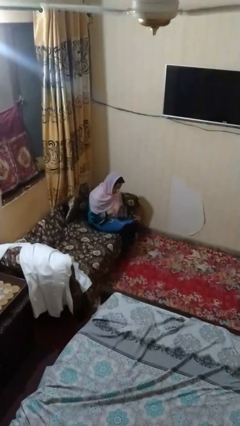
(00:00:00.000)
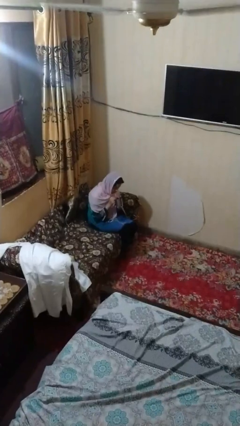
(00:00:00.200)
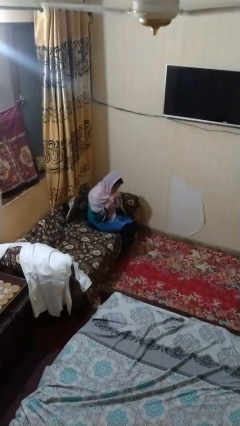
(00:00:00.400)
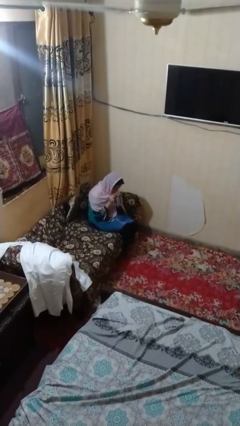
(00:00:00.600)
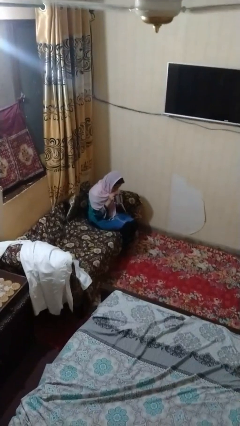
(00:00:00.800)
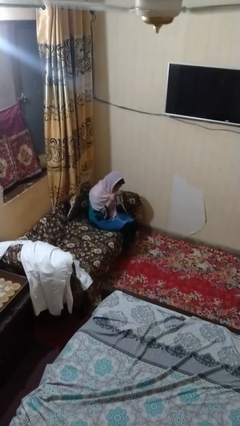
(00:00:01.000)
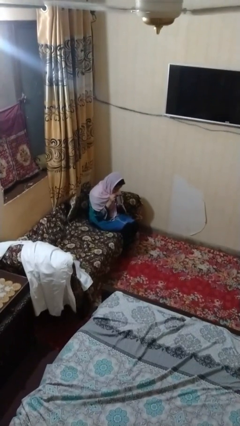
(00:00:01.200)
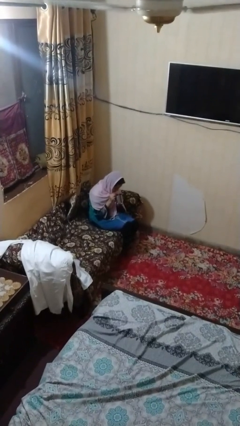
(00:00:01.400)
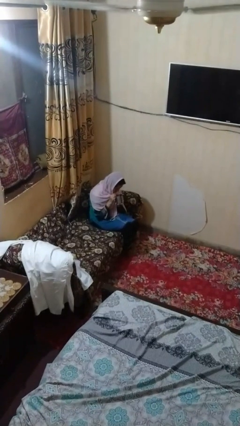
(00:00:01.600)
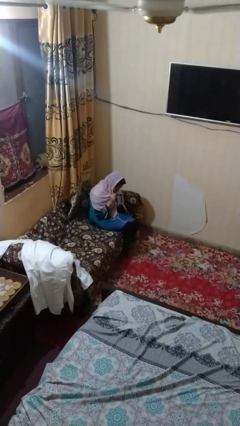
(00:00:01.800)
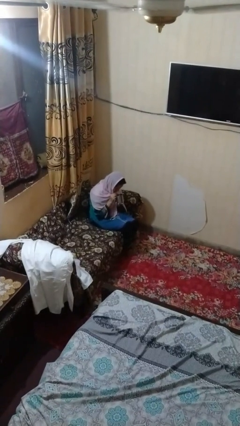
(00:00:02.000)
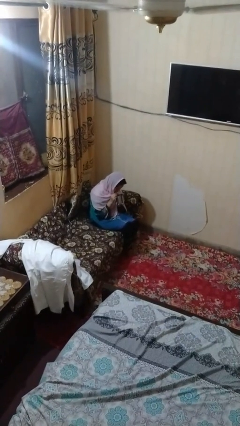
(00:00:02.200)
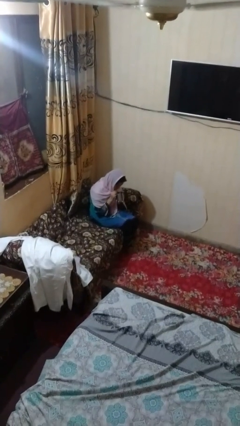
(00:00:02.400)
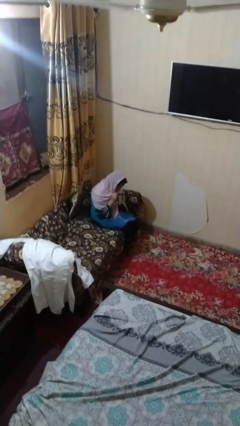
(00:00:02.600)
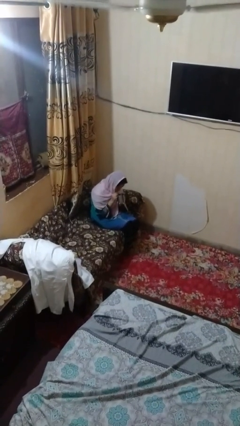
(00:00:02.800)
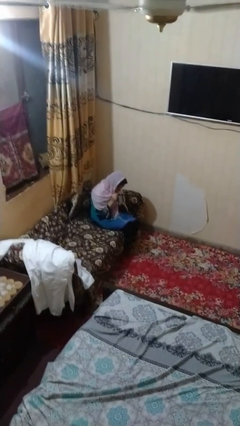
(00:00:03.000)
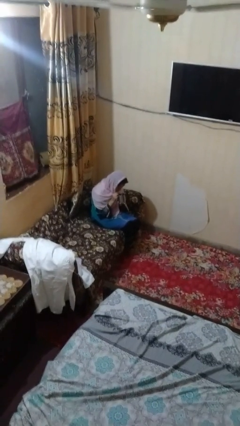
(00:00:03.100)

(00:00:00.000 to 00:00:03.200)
person drinks from straw

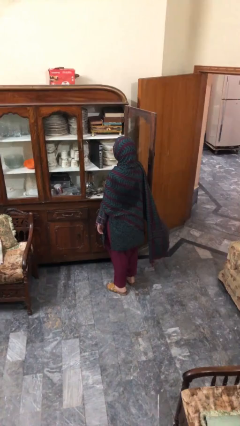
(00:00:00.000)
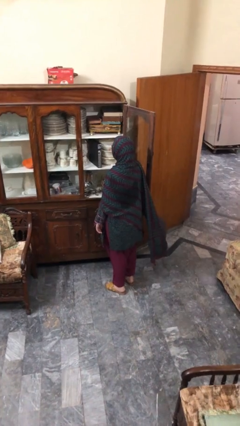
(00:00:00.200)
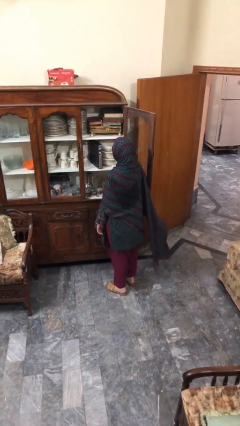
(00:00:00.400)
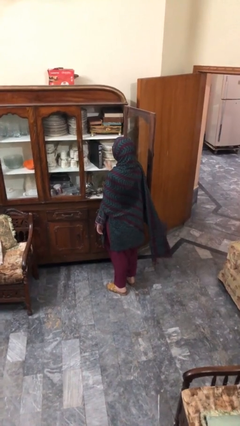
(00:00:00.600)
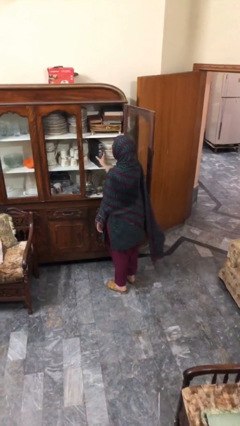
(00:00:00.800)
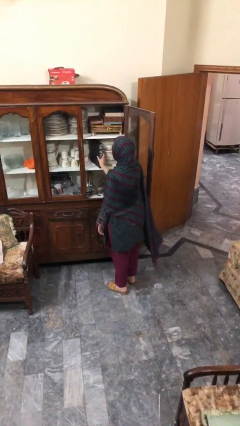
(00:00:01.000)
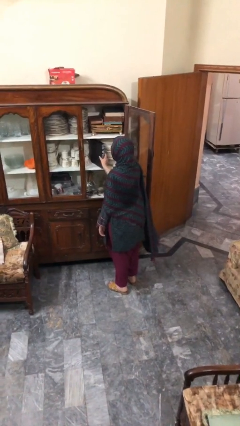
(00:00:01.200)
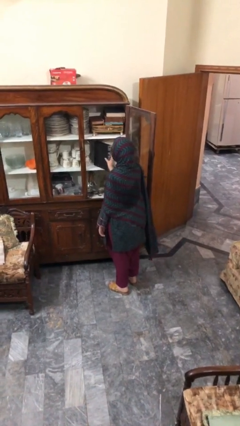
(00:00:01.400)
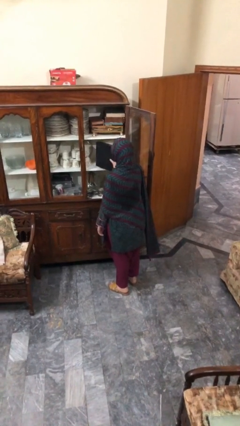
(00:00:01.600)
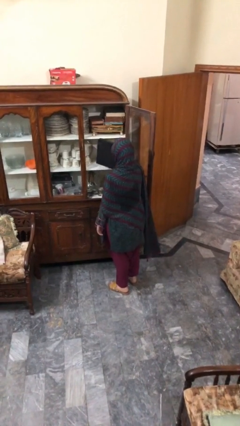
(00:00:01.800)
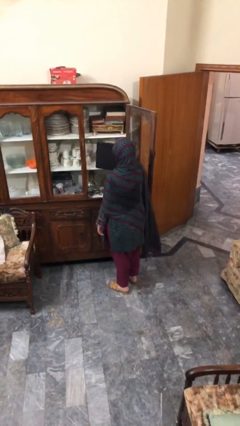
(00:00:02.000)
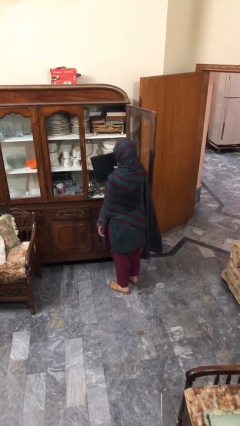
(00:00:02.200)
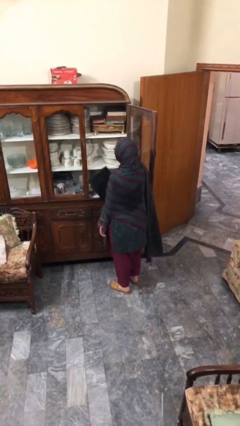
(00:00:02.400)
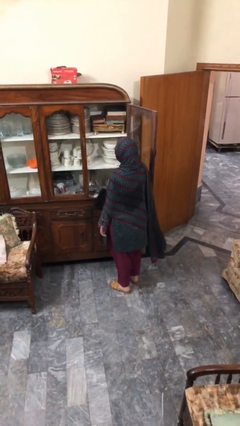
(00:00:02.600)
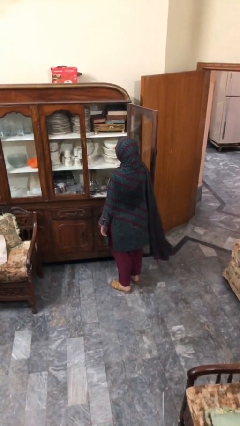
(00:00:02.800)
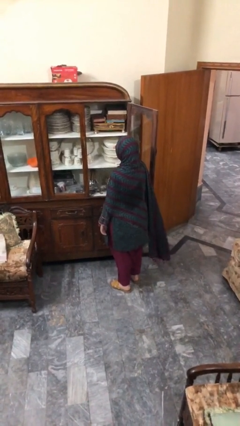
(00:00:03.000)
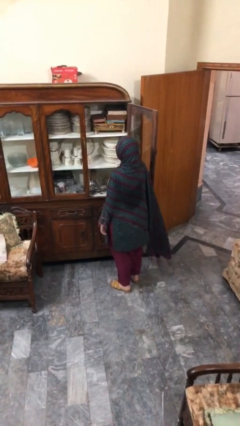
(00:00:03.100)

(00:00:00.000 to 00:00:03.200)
person picks up object from countertop

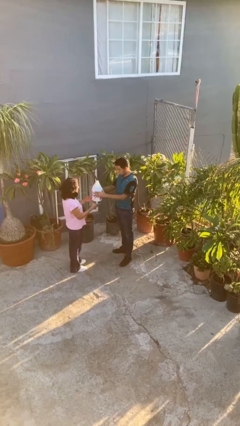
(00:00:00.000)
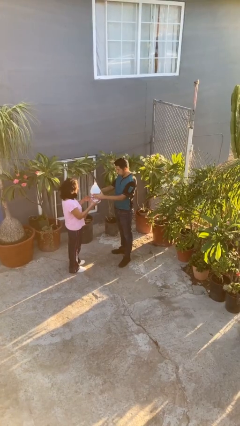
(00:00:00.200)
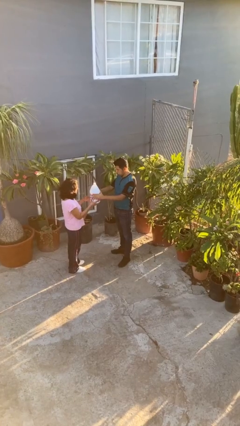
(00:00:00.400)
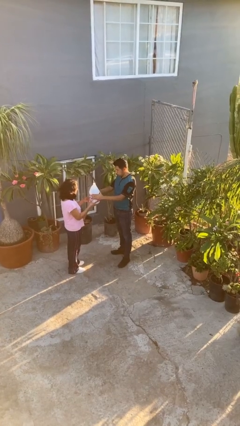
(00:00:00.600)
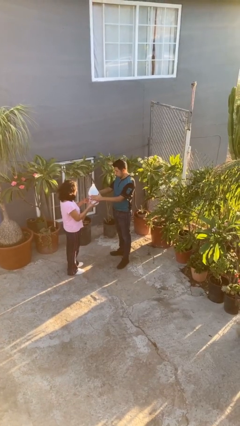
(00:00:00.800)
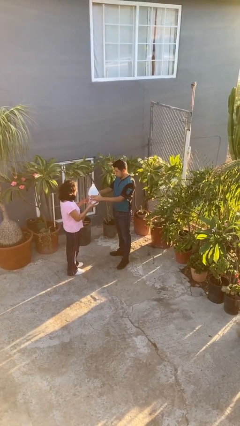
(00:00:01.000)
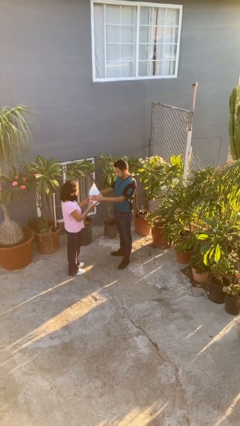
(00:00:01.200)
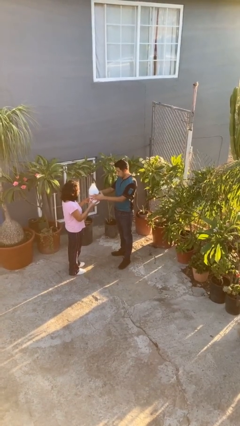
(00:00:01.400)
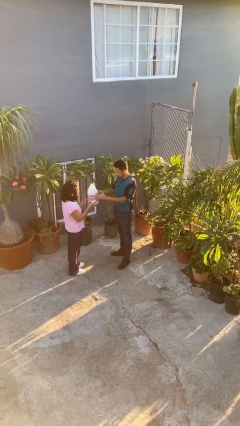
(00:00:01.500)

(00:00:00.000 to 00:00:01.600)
person transfers object to person

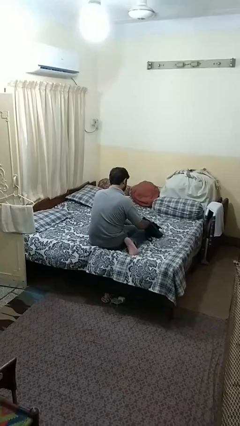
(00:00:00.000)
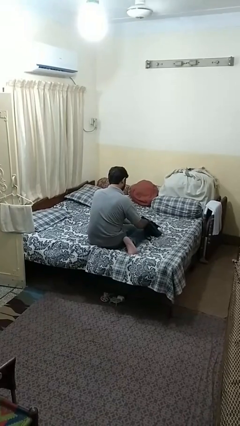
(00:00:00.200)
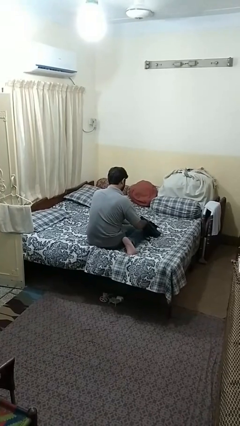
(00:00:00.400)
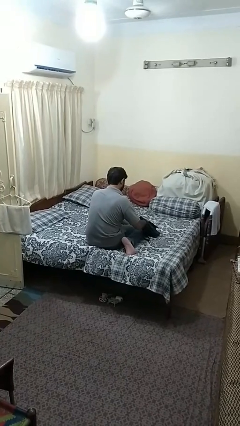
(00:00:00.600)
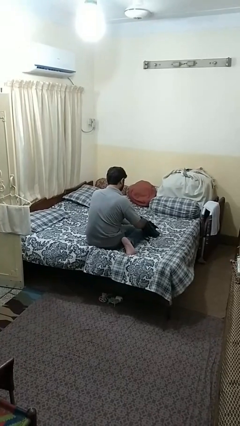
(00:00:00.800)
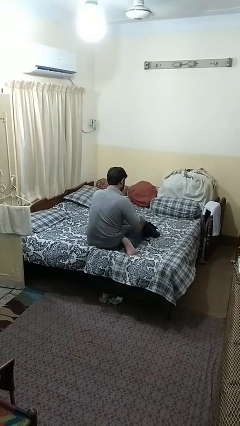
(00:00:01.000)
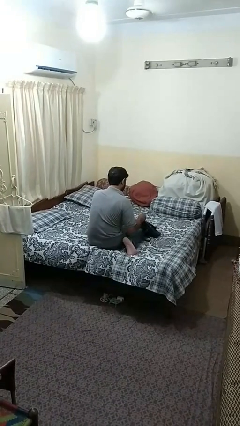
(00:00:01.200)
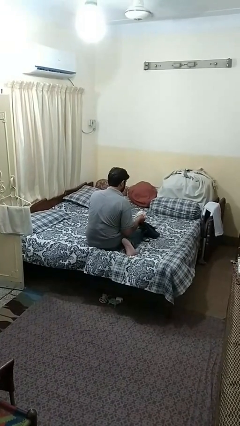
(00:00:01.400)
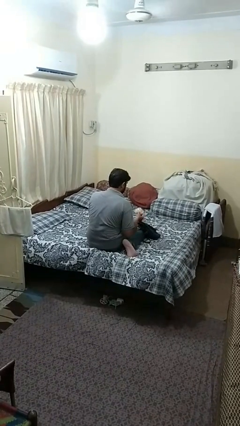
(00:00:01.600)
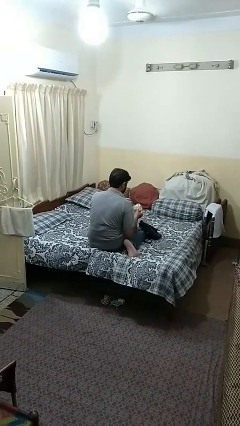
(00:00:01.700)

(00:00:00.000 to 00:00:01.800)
person takes object from purse

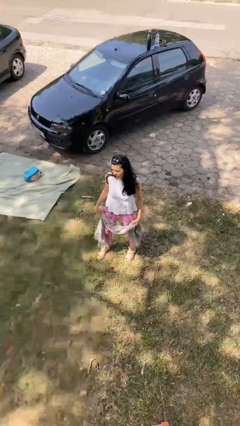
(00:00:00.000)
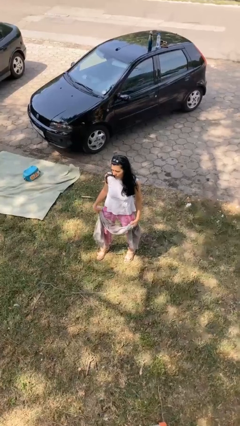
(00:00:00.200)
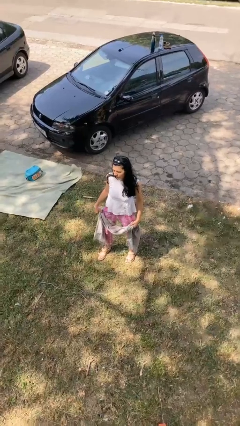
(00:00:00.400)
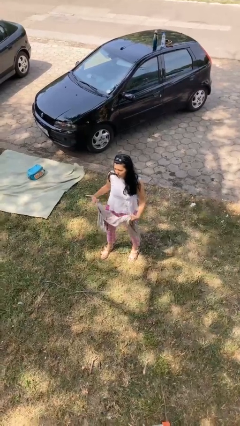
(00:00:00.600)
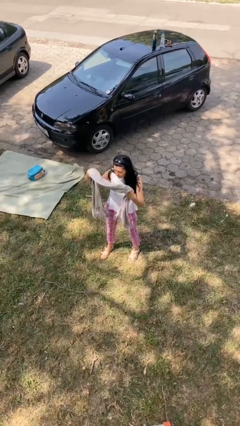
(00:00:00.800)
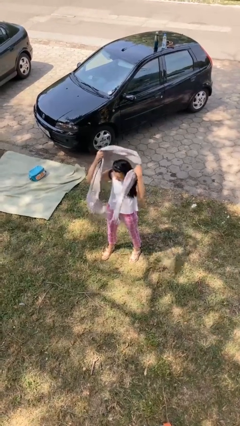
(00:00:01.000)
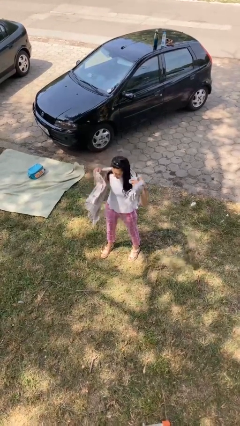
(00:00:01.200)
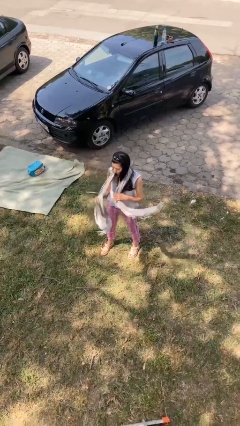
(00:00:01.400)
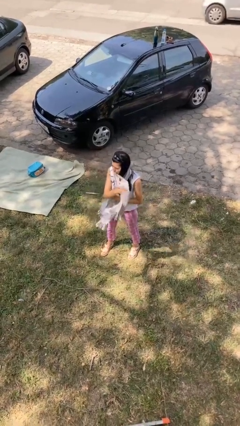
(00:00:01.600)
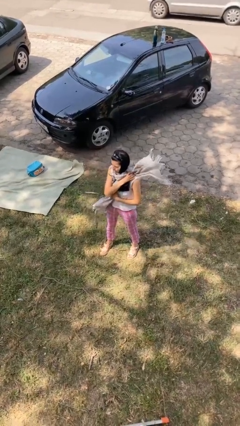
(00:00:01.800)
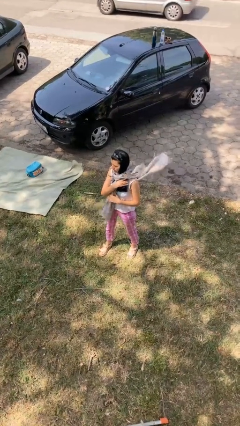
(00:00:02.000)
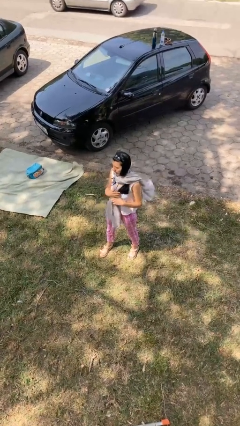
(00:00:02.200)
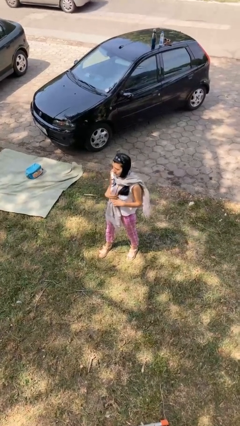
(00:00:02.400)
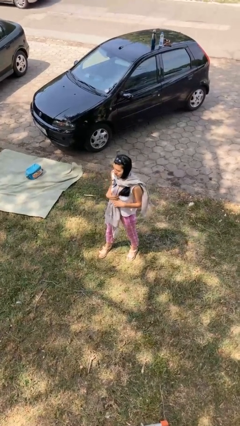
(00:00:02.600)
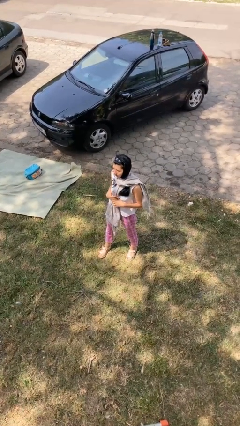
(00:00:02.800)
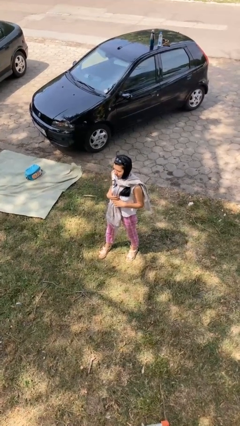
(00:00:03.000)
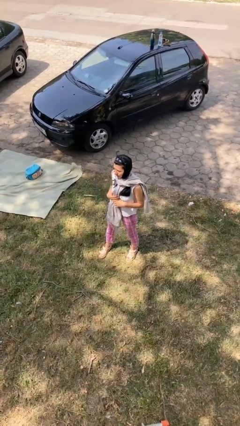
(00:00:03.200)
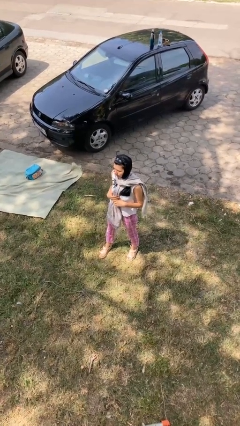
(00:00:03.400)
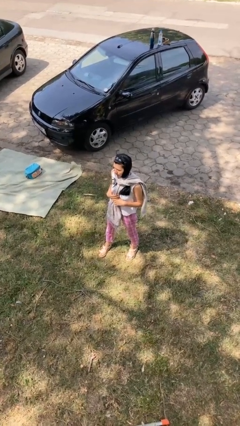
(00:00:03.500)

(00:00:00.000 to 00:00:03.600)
person puts on scarf

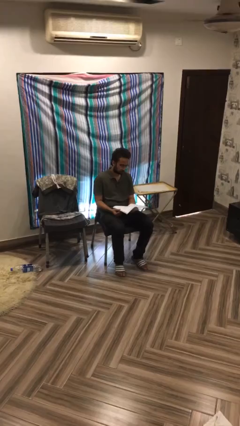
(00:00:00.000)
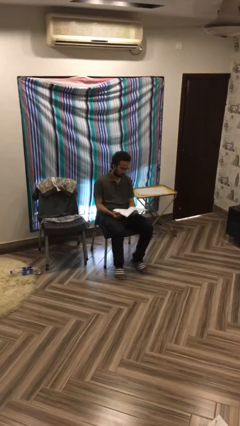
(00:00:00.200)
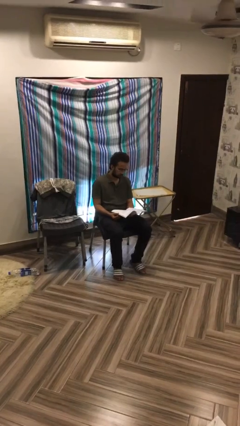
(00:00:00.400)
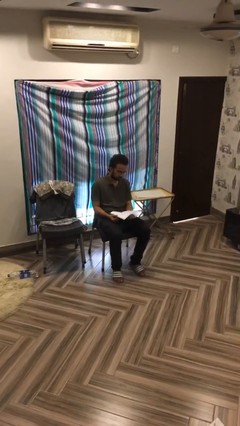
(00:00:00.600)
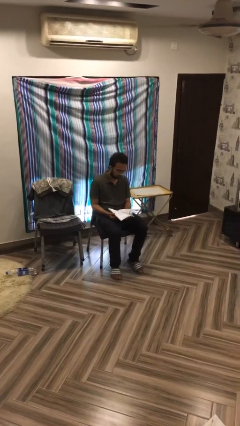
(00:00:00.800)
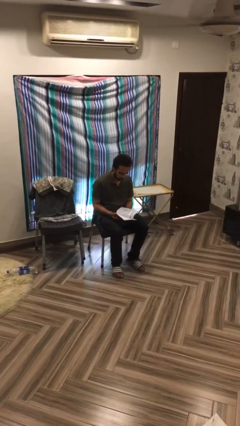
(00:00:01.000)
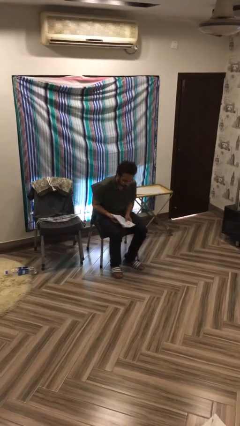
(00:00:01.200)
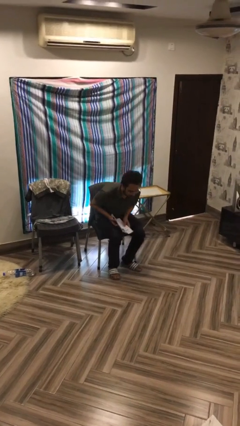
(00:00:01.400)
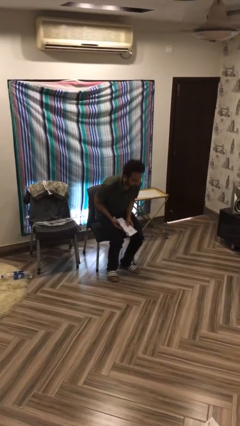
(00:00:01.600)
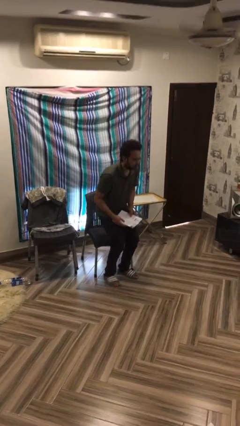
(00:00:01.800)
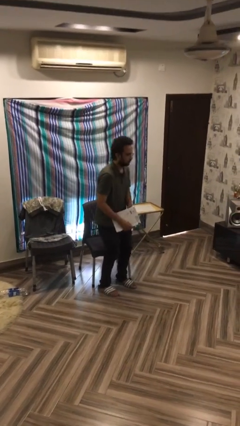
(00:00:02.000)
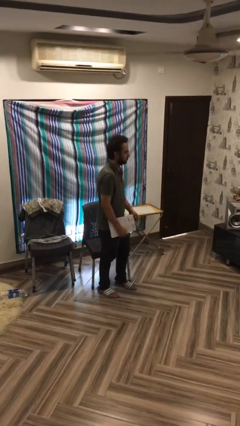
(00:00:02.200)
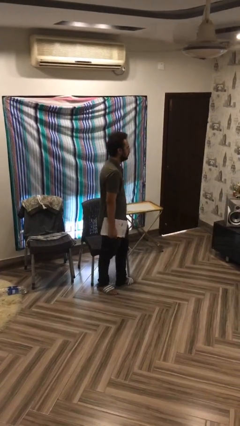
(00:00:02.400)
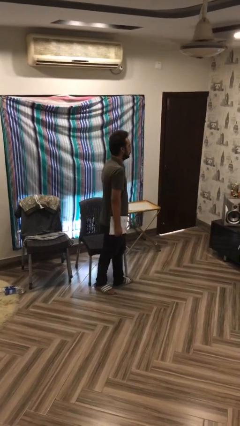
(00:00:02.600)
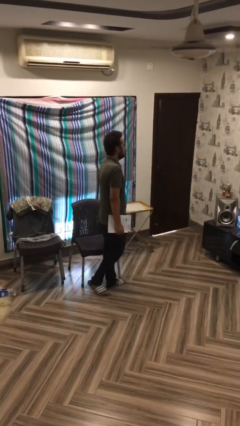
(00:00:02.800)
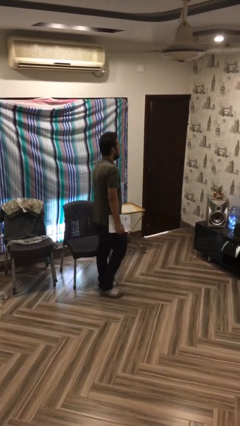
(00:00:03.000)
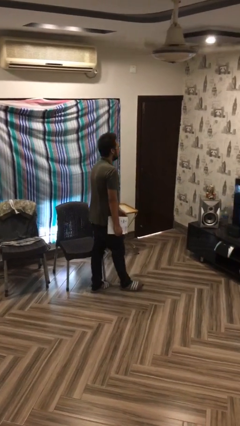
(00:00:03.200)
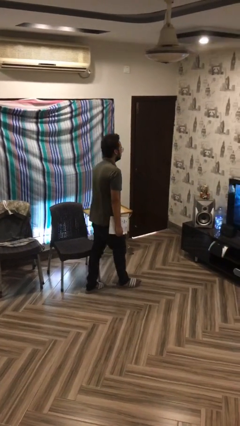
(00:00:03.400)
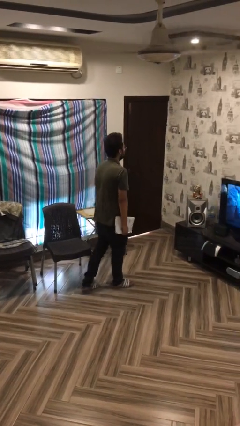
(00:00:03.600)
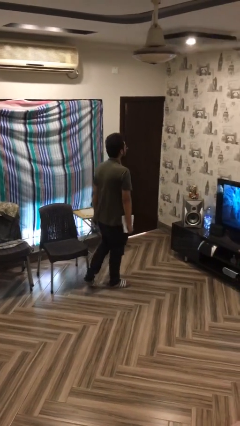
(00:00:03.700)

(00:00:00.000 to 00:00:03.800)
person stands up
